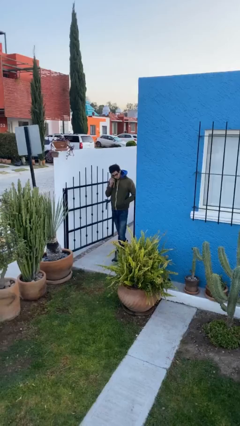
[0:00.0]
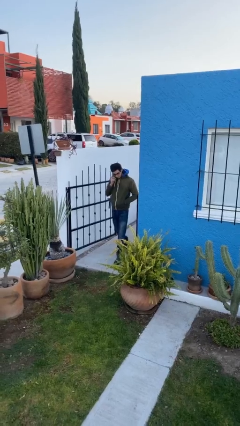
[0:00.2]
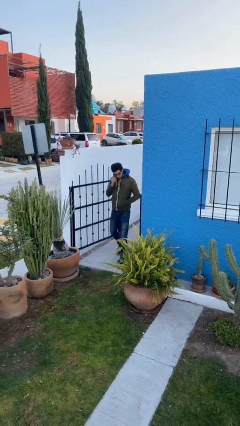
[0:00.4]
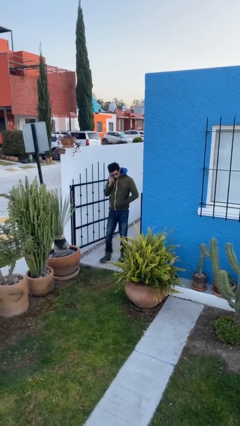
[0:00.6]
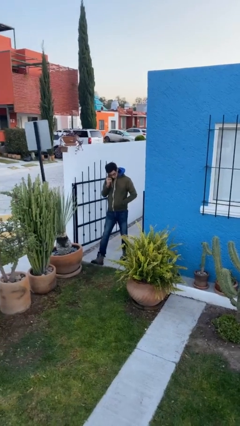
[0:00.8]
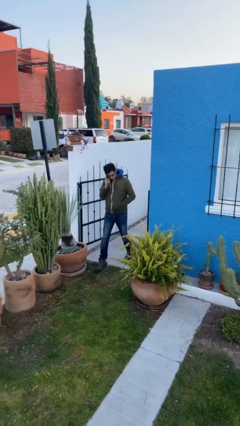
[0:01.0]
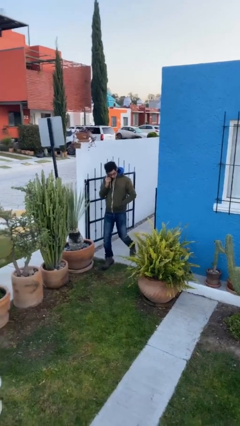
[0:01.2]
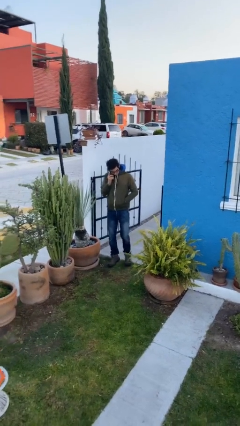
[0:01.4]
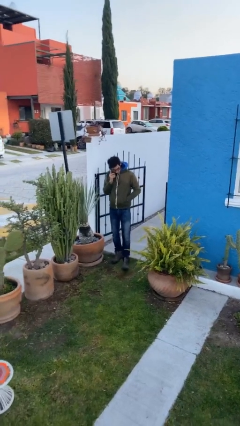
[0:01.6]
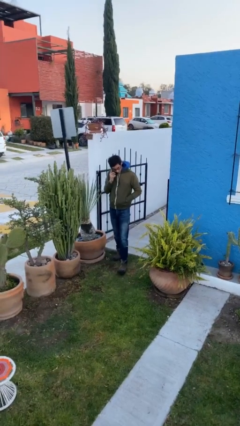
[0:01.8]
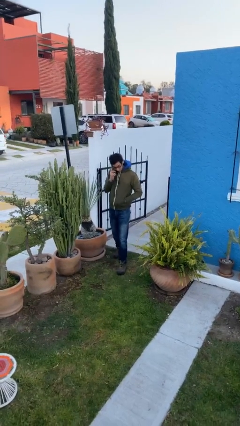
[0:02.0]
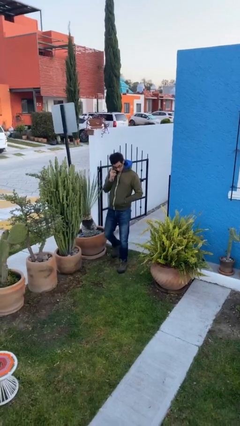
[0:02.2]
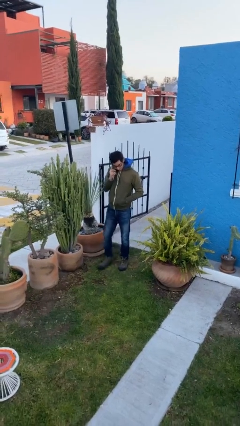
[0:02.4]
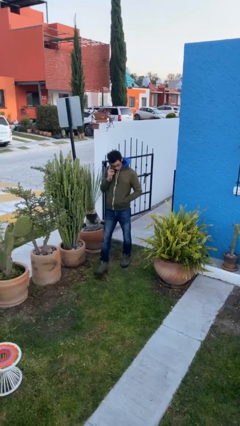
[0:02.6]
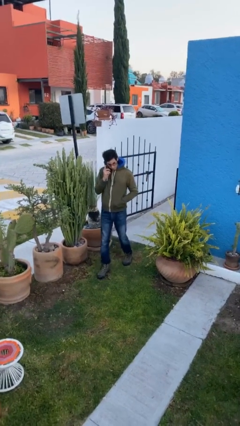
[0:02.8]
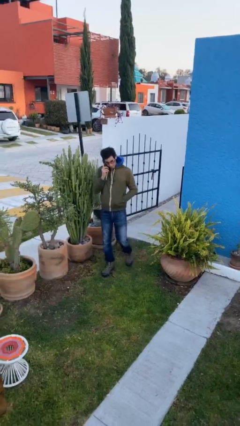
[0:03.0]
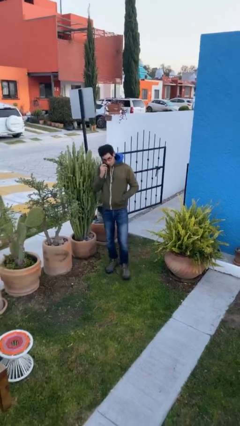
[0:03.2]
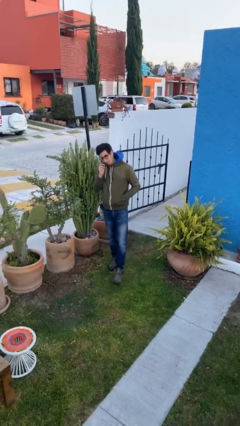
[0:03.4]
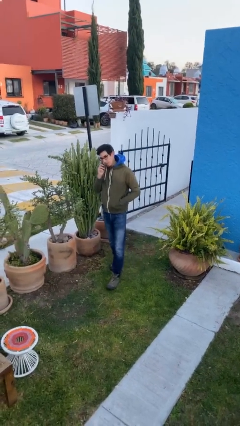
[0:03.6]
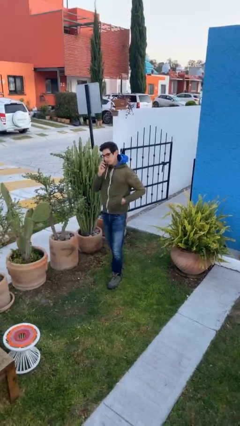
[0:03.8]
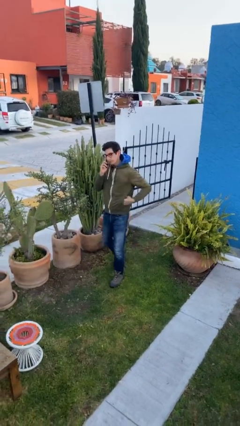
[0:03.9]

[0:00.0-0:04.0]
person enters scene through structure

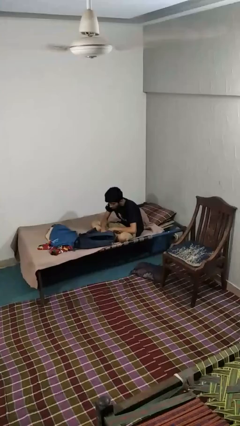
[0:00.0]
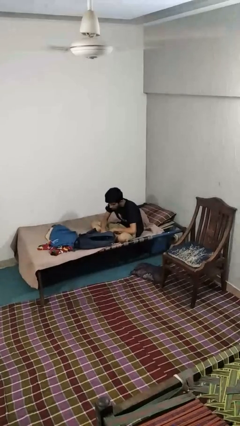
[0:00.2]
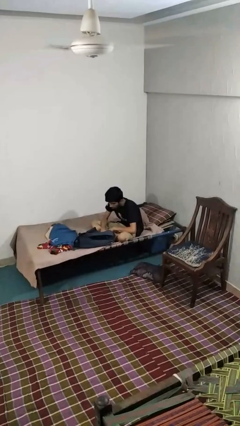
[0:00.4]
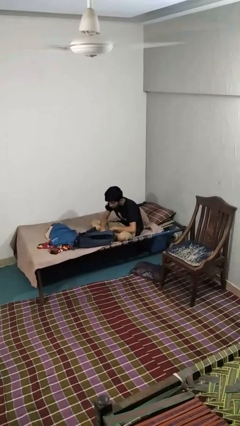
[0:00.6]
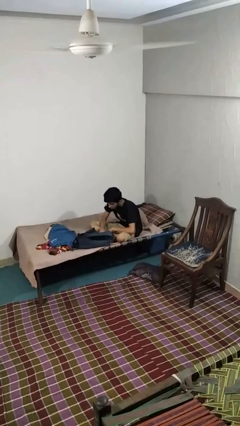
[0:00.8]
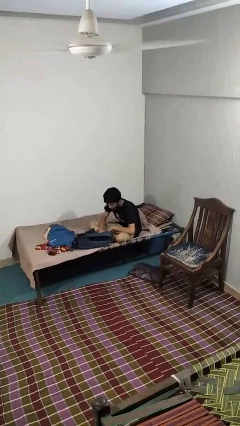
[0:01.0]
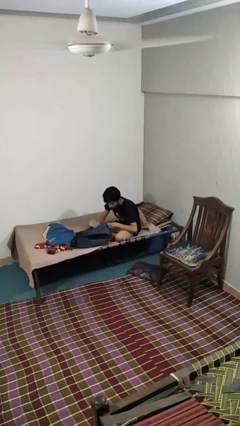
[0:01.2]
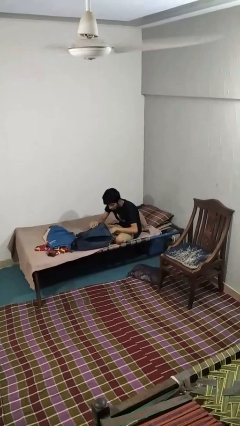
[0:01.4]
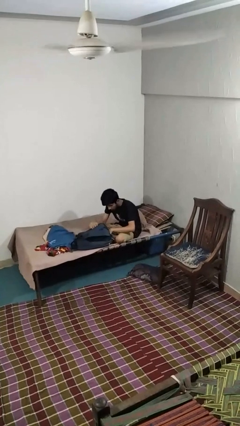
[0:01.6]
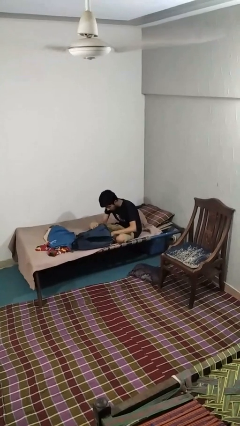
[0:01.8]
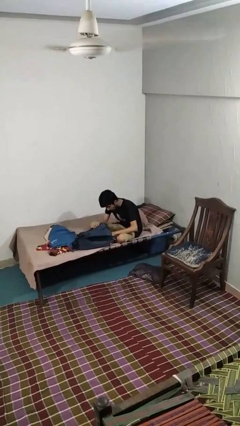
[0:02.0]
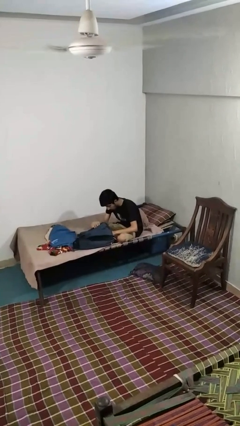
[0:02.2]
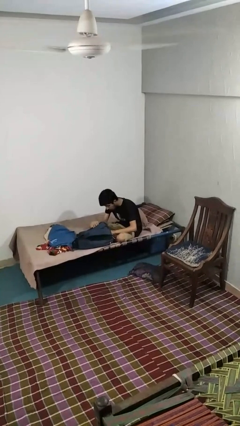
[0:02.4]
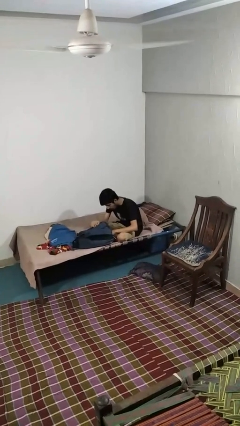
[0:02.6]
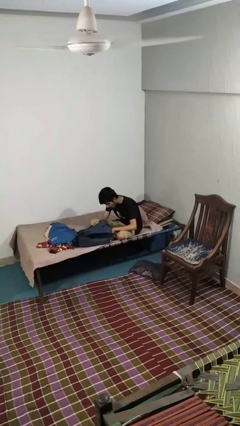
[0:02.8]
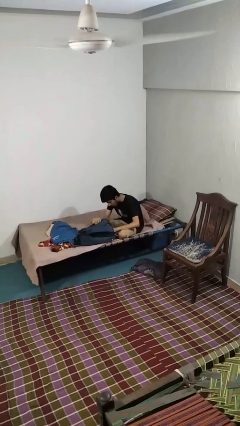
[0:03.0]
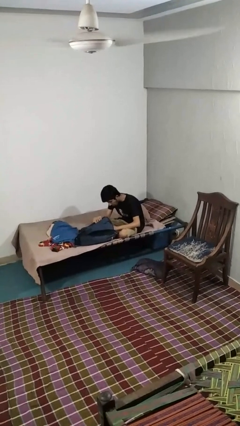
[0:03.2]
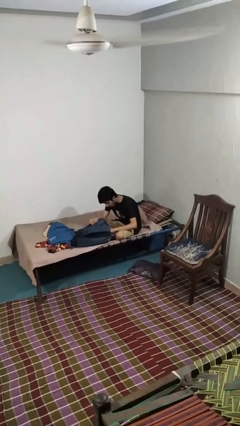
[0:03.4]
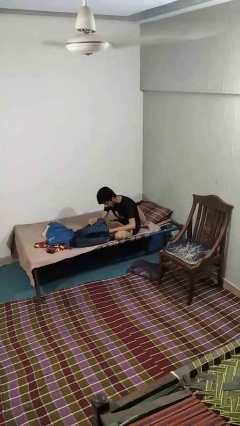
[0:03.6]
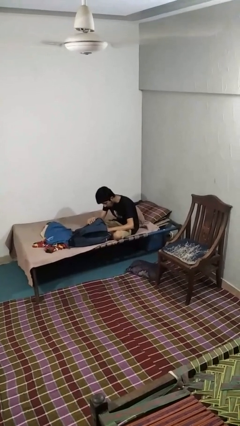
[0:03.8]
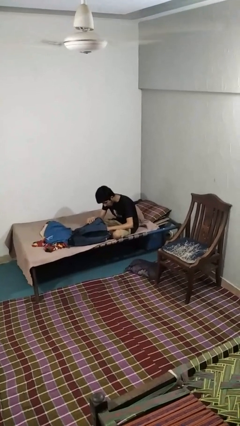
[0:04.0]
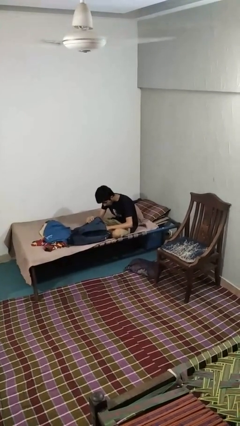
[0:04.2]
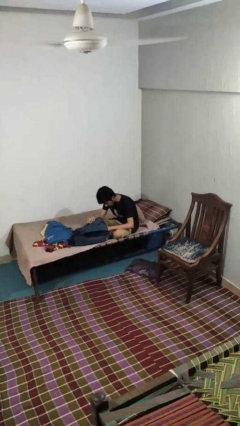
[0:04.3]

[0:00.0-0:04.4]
person searches in backpack

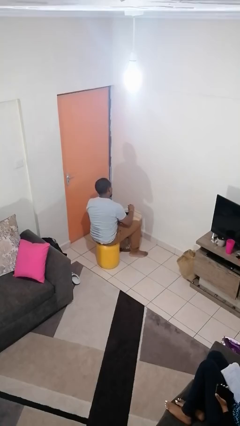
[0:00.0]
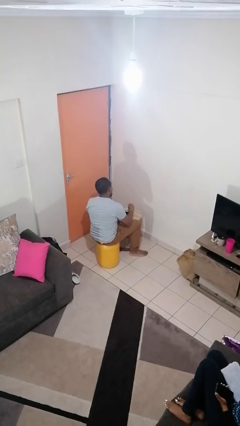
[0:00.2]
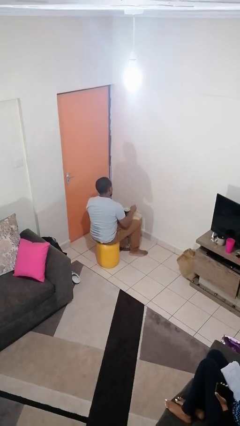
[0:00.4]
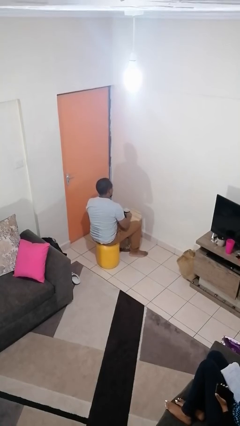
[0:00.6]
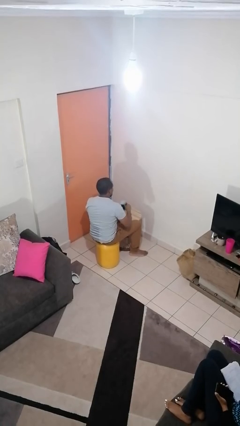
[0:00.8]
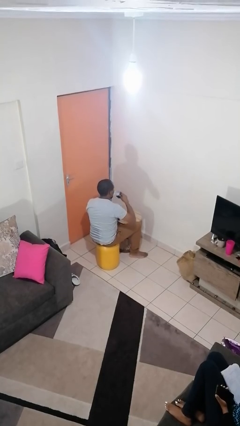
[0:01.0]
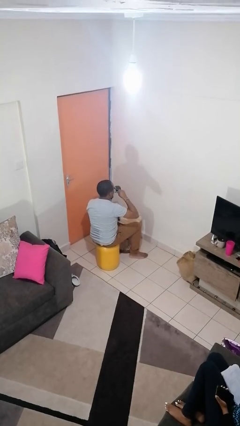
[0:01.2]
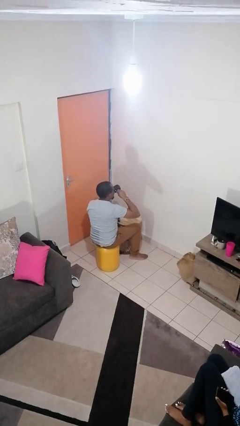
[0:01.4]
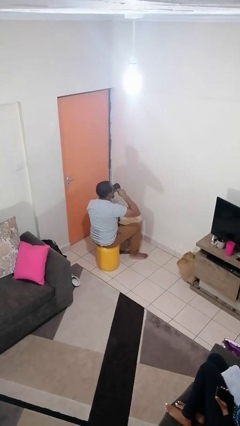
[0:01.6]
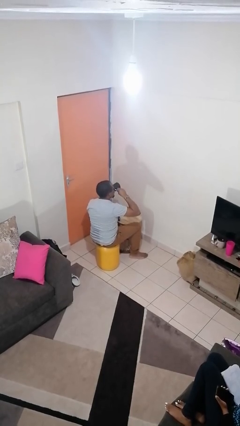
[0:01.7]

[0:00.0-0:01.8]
person drinks from mug

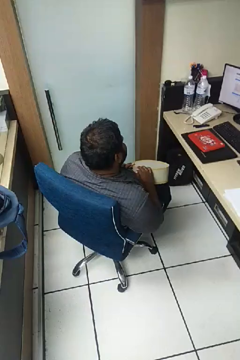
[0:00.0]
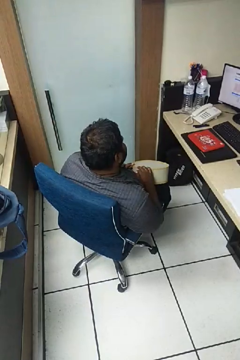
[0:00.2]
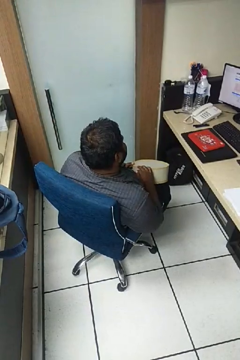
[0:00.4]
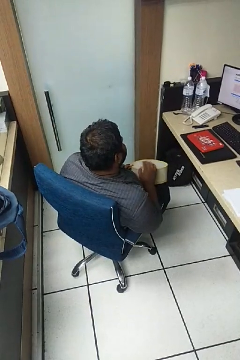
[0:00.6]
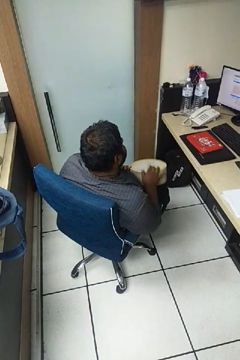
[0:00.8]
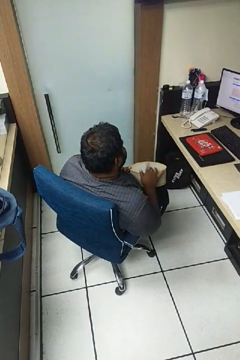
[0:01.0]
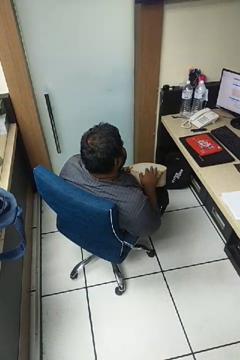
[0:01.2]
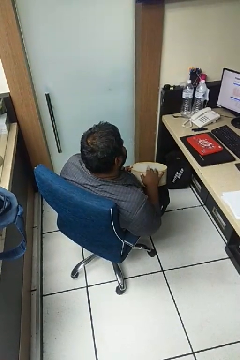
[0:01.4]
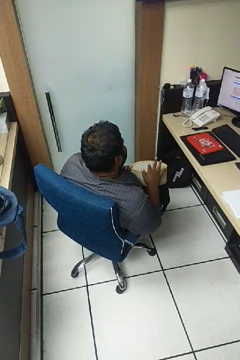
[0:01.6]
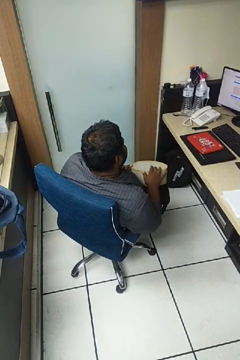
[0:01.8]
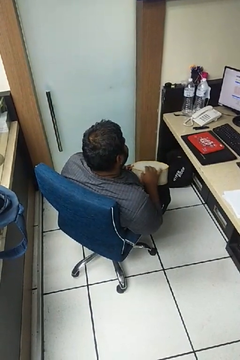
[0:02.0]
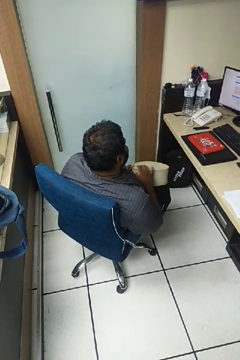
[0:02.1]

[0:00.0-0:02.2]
person taps object with finger

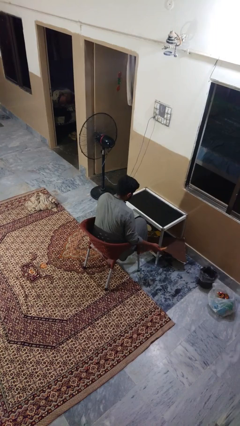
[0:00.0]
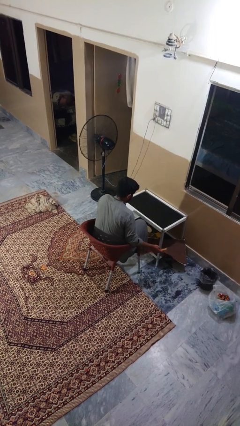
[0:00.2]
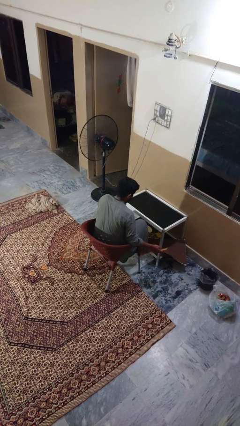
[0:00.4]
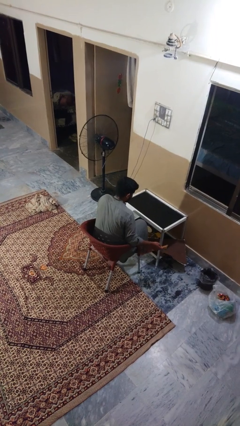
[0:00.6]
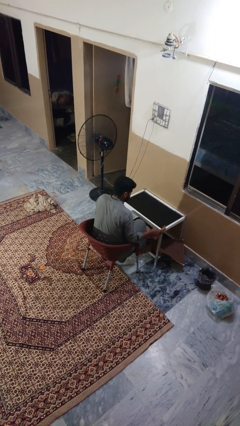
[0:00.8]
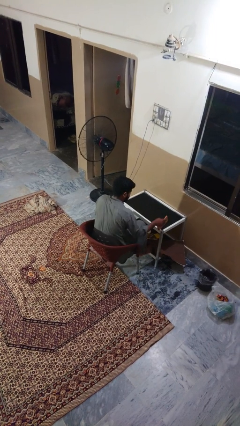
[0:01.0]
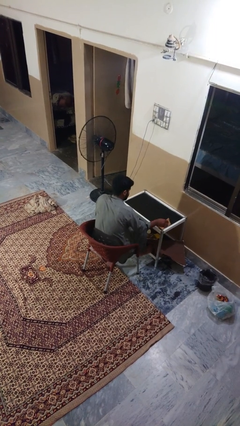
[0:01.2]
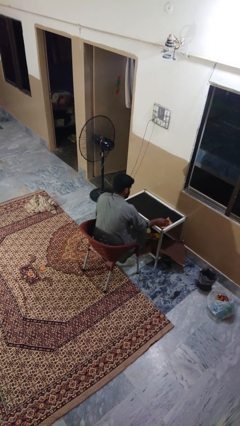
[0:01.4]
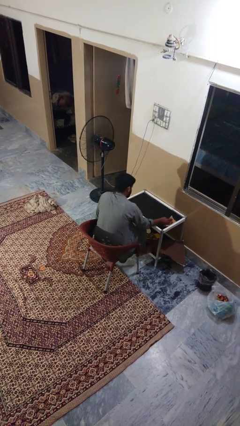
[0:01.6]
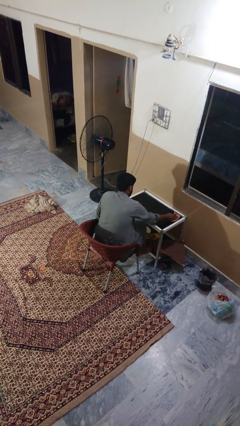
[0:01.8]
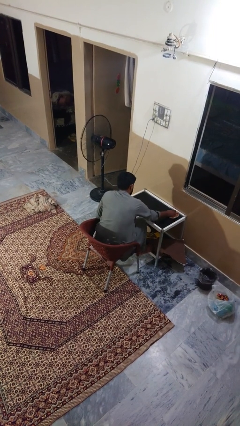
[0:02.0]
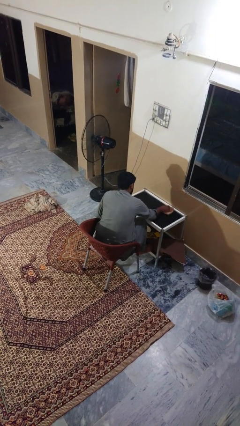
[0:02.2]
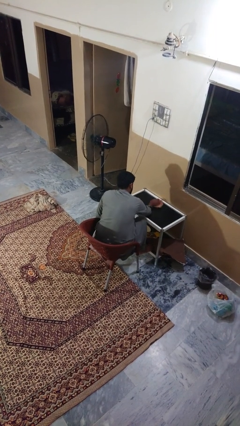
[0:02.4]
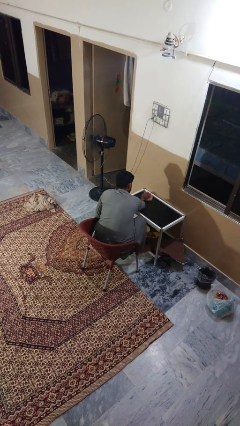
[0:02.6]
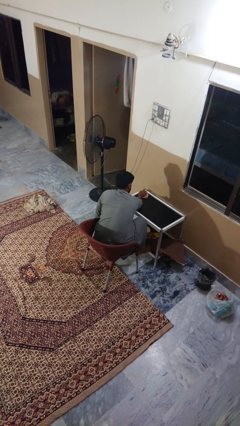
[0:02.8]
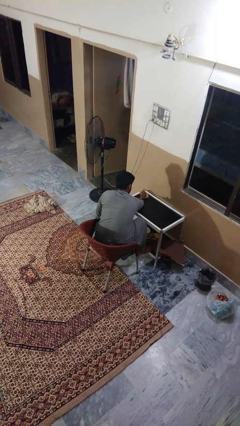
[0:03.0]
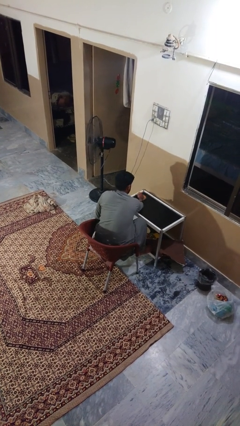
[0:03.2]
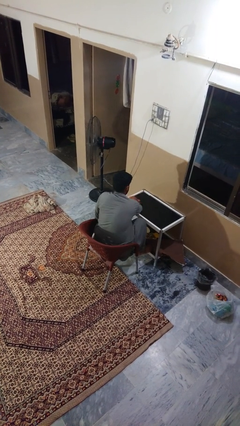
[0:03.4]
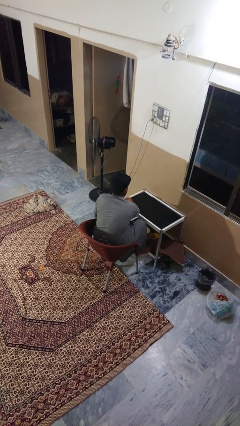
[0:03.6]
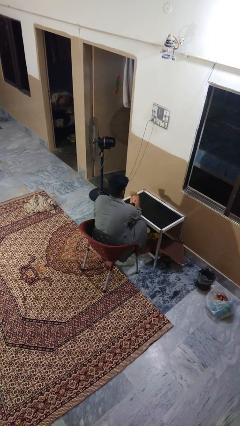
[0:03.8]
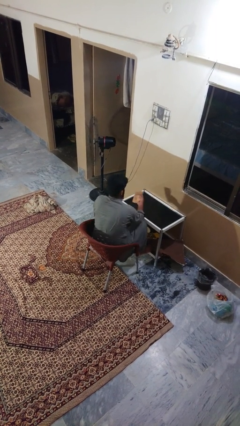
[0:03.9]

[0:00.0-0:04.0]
person cleans table with rag

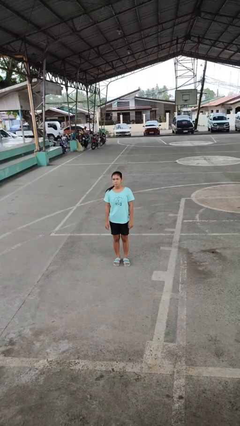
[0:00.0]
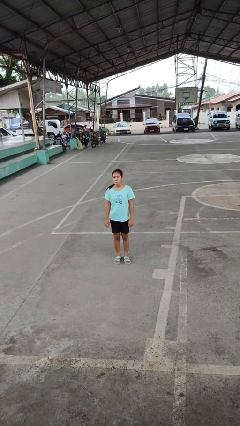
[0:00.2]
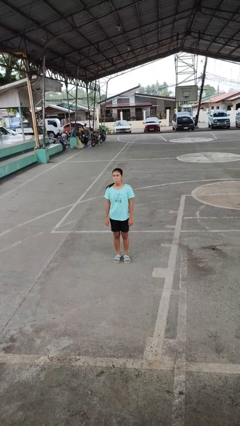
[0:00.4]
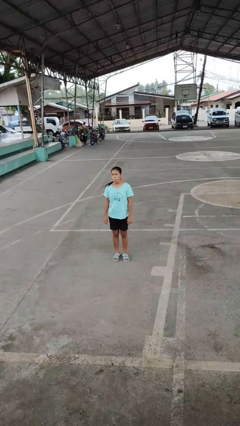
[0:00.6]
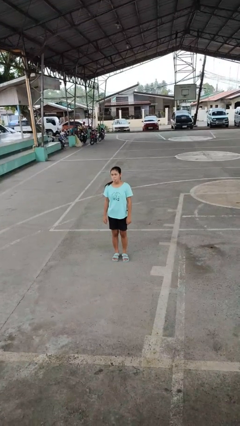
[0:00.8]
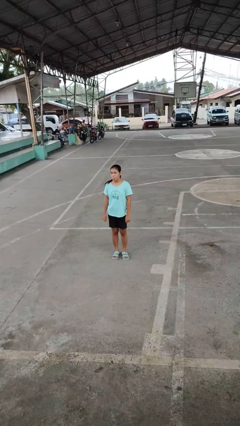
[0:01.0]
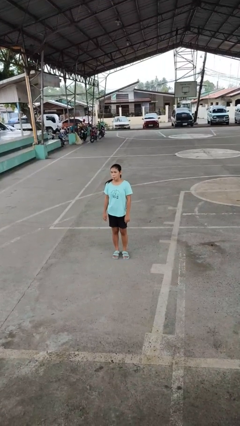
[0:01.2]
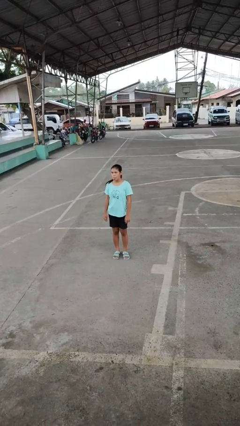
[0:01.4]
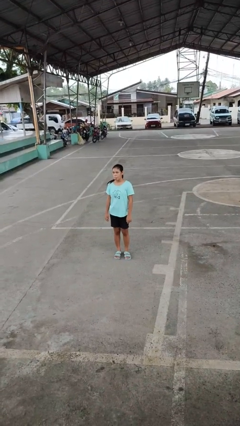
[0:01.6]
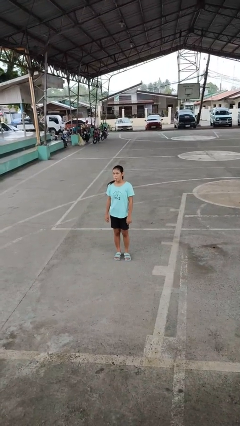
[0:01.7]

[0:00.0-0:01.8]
person sticks out tongue
